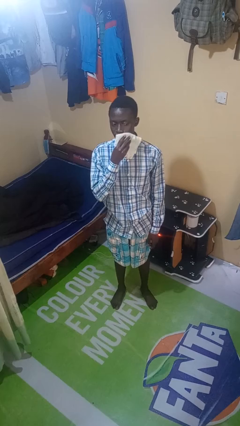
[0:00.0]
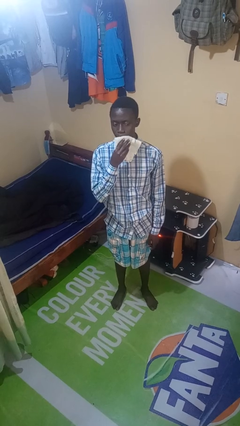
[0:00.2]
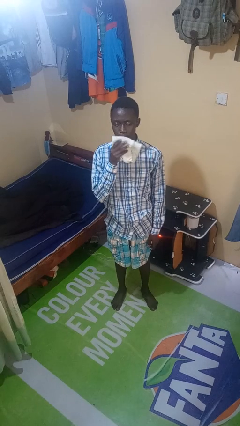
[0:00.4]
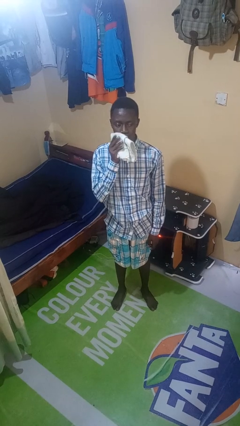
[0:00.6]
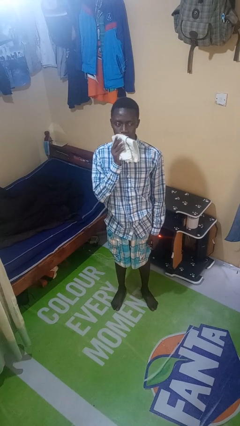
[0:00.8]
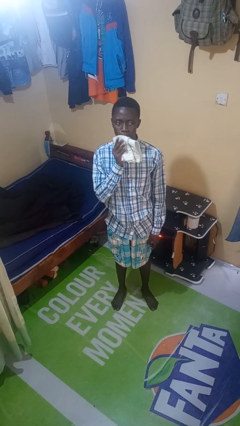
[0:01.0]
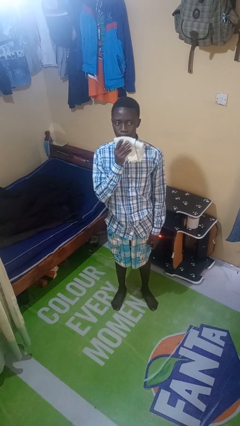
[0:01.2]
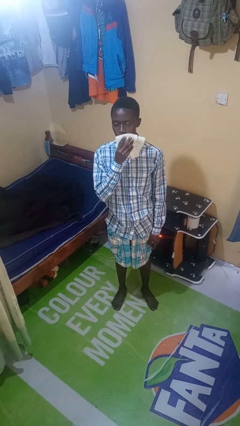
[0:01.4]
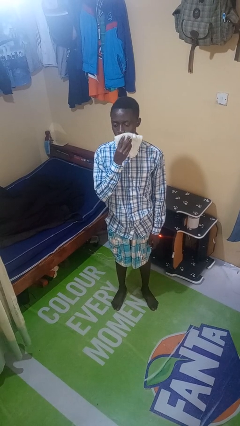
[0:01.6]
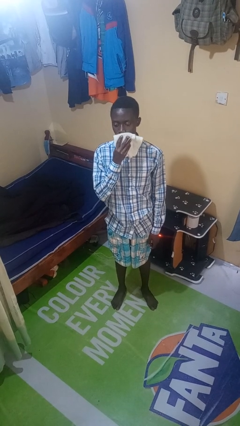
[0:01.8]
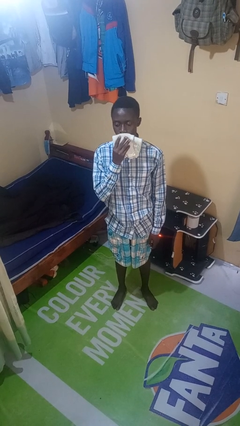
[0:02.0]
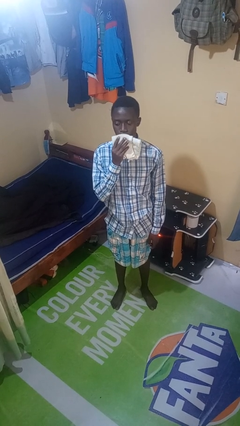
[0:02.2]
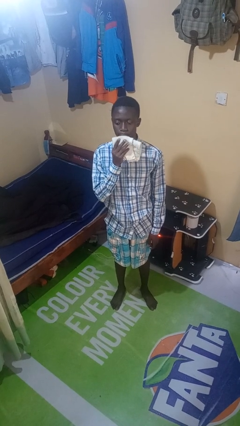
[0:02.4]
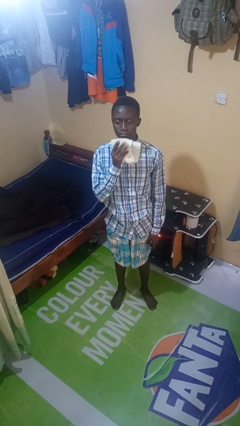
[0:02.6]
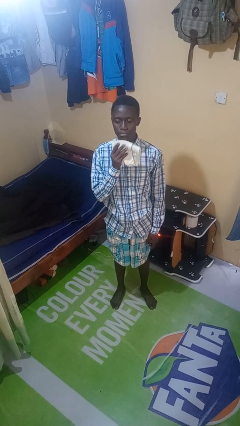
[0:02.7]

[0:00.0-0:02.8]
person wipes mouth with napkin

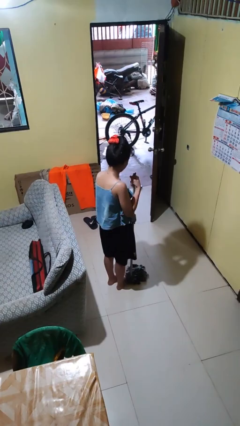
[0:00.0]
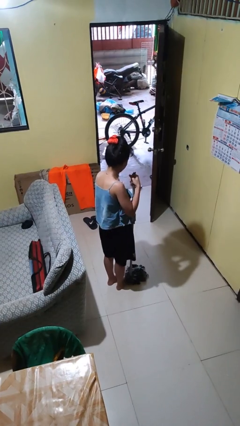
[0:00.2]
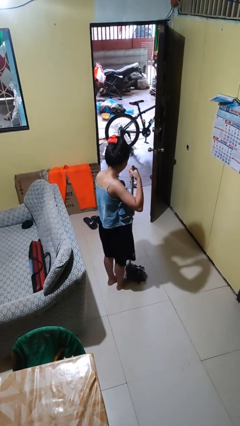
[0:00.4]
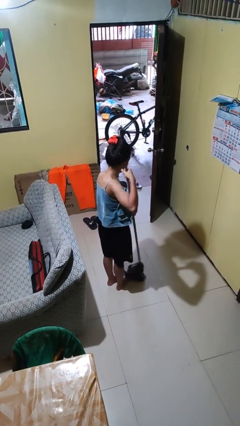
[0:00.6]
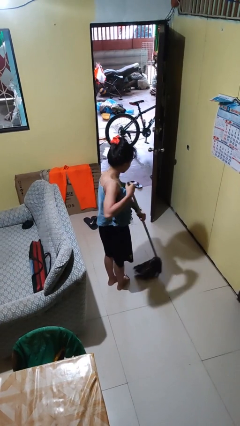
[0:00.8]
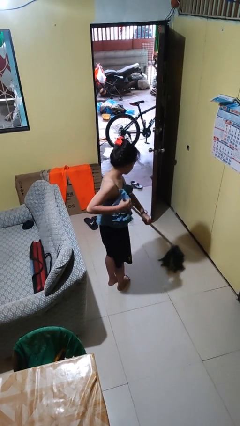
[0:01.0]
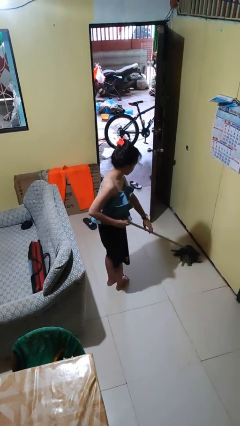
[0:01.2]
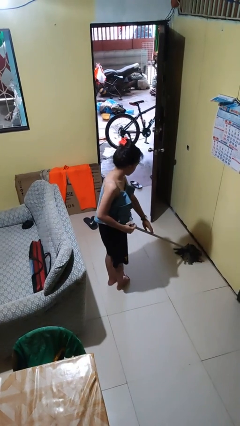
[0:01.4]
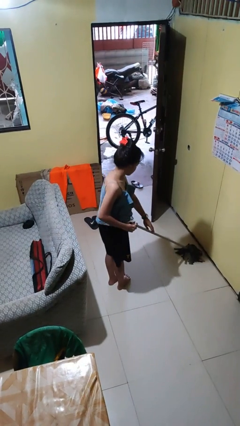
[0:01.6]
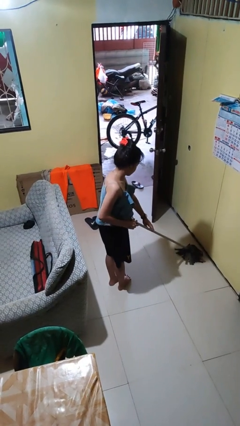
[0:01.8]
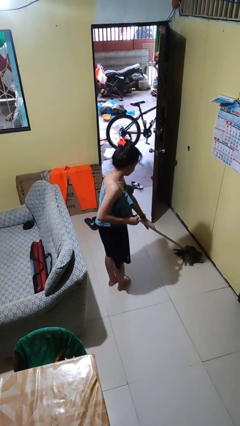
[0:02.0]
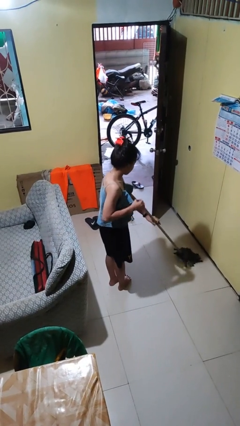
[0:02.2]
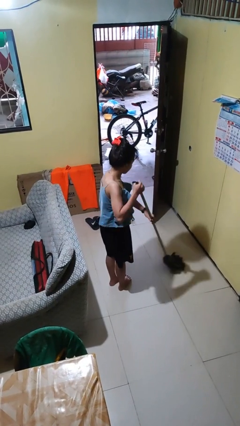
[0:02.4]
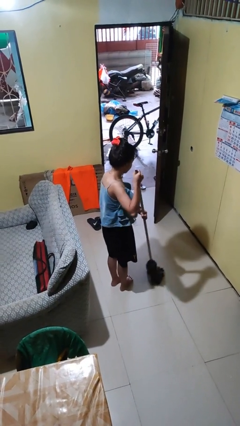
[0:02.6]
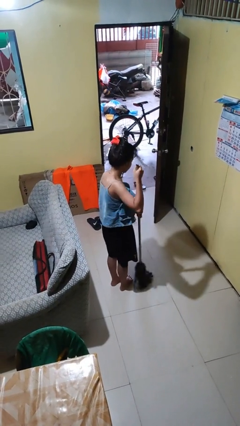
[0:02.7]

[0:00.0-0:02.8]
person mops

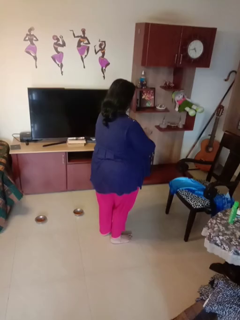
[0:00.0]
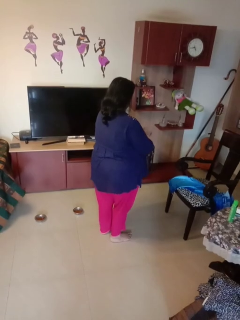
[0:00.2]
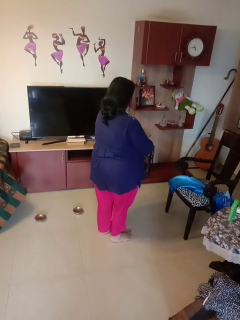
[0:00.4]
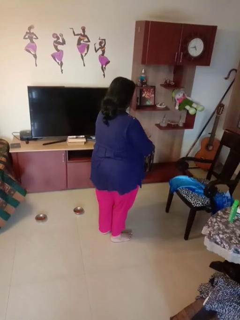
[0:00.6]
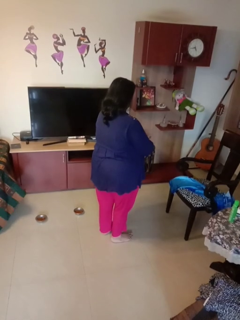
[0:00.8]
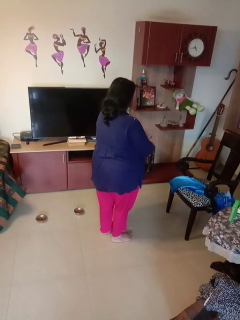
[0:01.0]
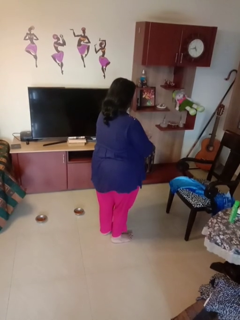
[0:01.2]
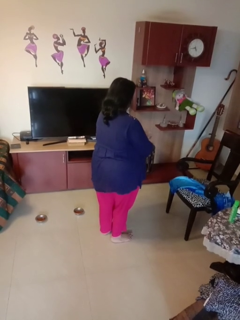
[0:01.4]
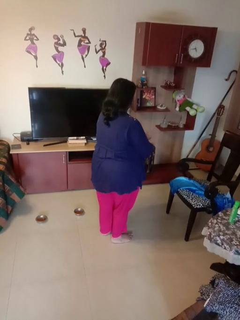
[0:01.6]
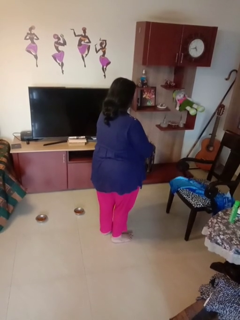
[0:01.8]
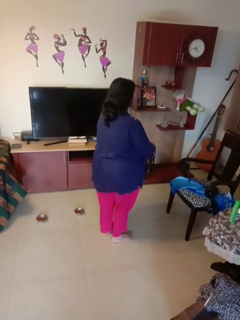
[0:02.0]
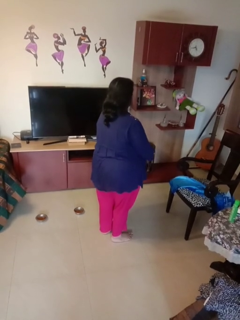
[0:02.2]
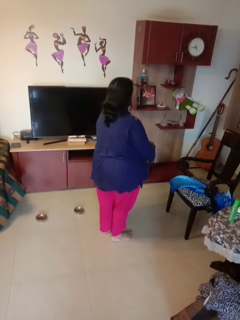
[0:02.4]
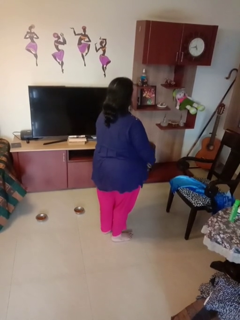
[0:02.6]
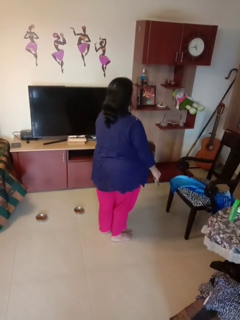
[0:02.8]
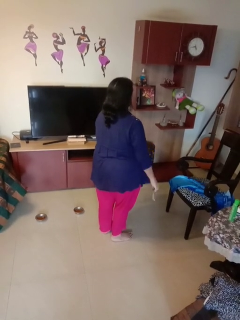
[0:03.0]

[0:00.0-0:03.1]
person takes off wristwatch

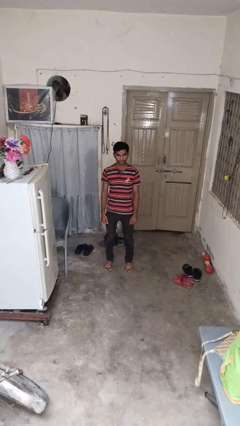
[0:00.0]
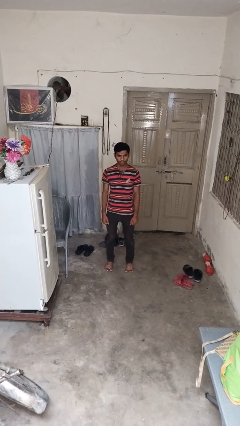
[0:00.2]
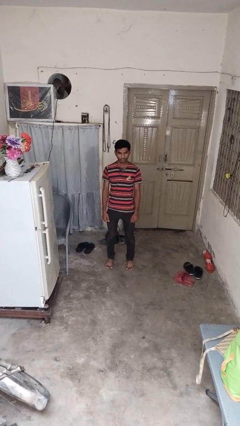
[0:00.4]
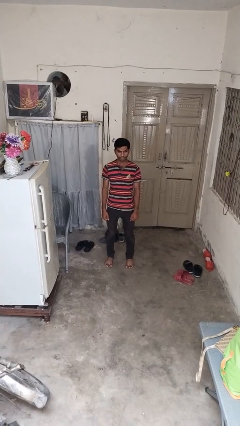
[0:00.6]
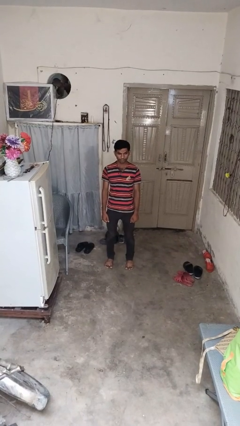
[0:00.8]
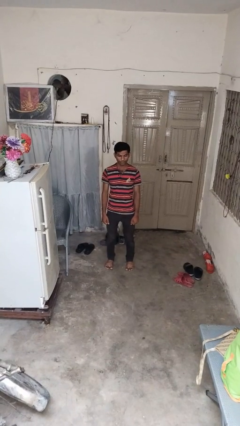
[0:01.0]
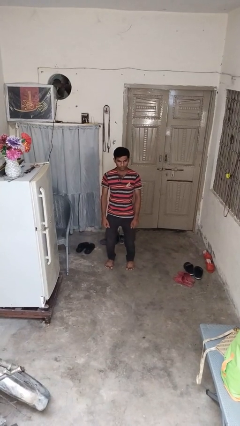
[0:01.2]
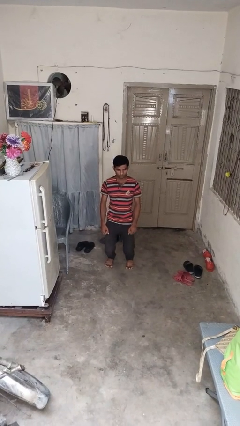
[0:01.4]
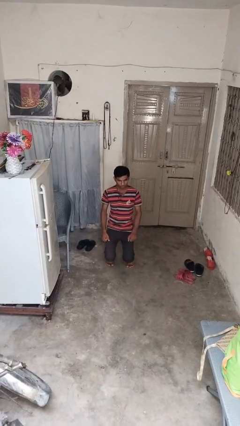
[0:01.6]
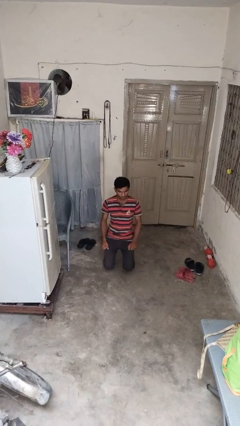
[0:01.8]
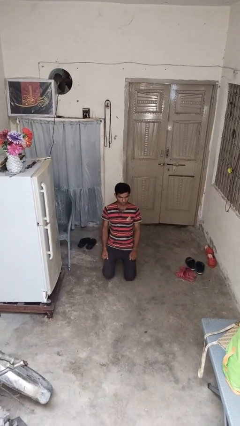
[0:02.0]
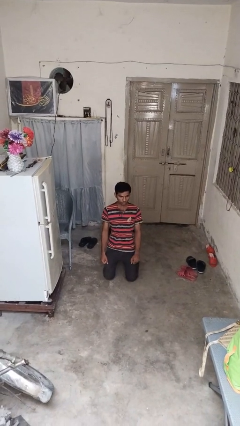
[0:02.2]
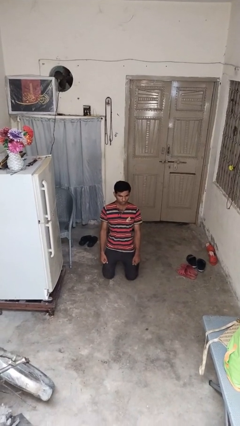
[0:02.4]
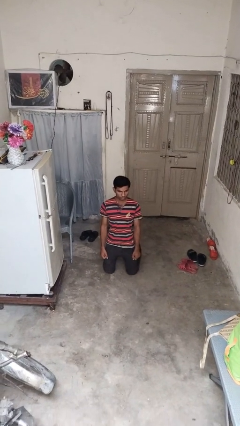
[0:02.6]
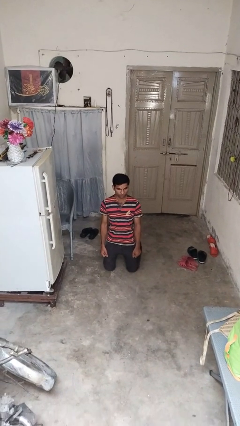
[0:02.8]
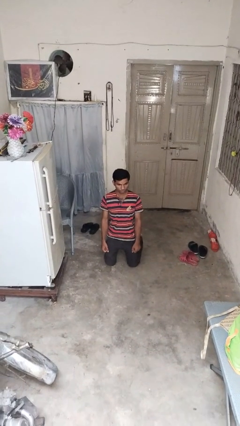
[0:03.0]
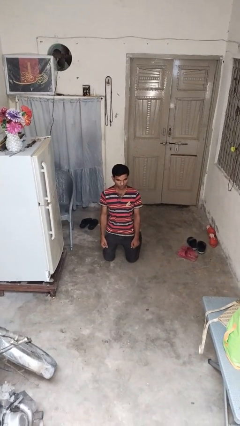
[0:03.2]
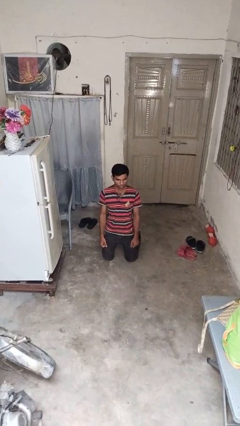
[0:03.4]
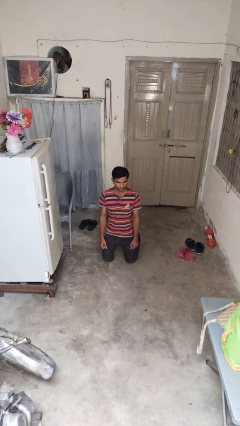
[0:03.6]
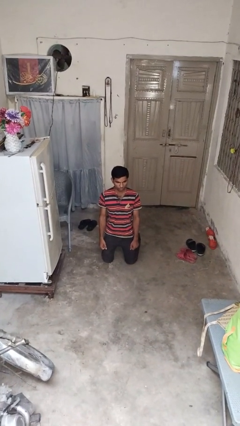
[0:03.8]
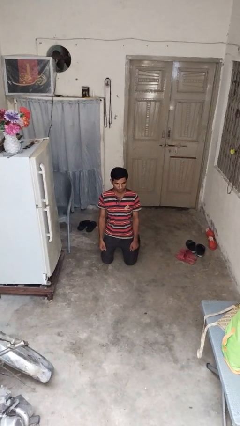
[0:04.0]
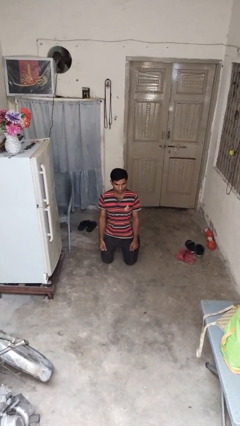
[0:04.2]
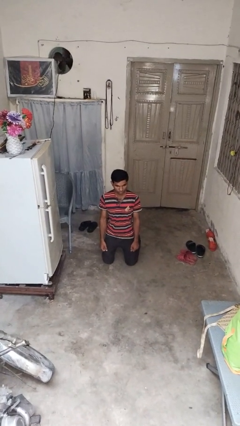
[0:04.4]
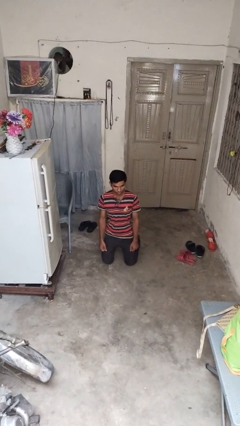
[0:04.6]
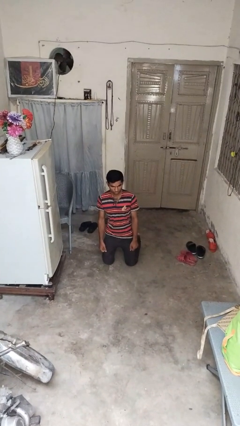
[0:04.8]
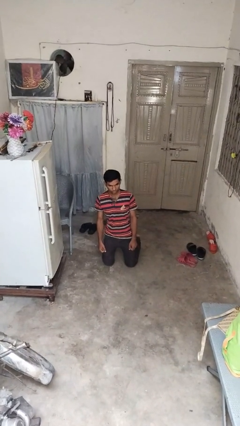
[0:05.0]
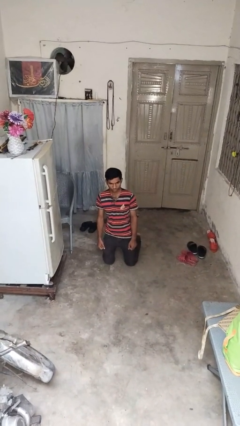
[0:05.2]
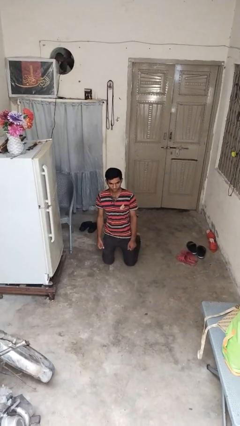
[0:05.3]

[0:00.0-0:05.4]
person kneels

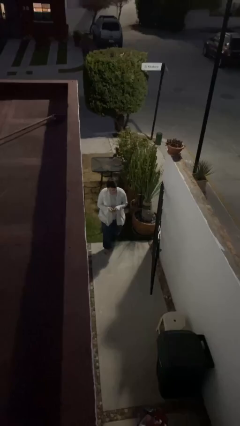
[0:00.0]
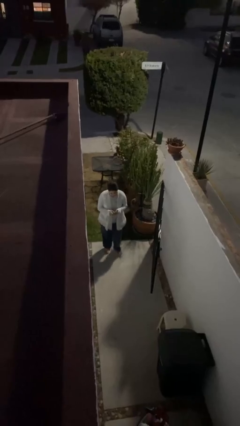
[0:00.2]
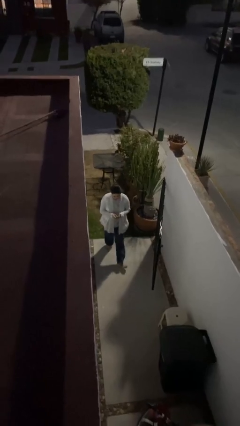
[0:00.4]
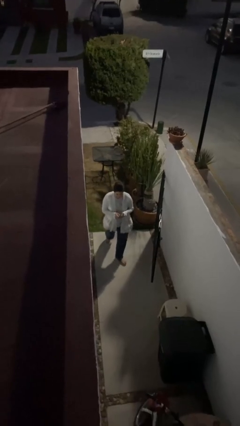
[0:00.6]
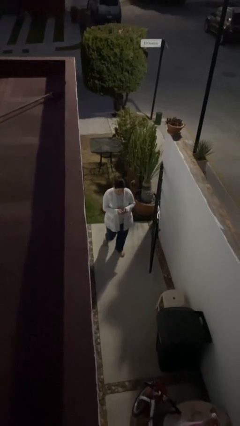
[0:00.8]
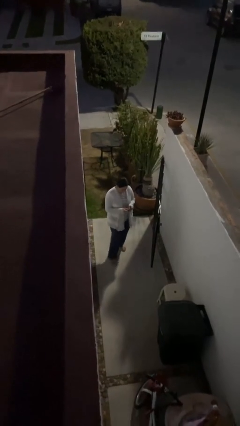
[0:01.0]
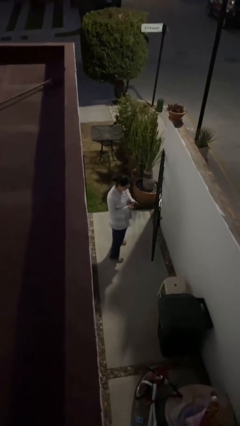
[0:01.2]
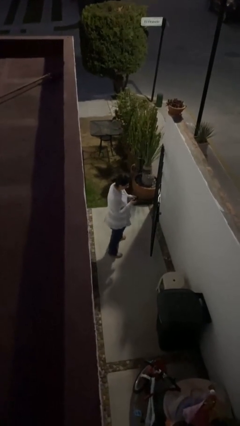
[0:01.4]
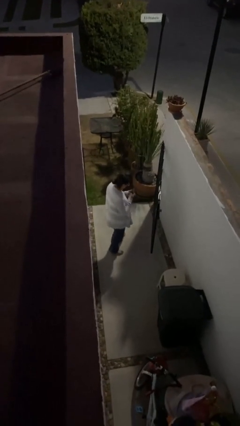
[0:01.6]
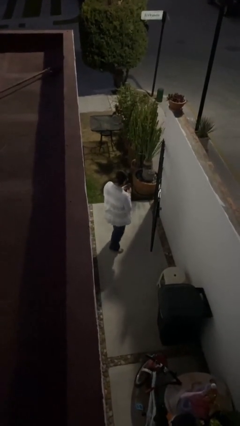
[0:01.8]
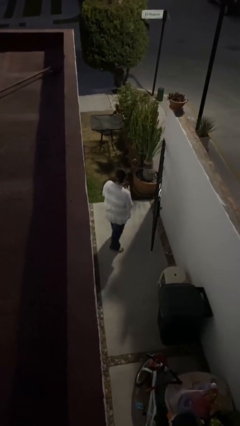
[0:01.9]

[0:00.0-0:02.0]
person enters scene through structure

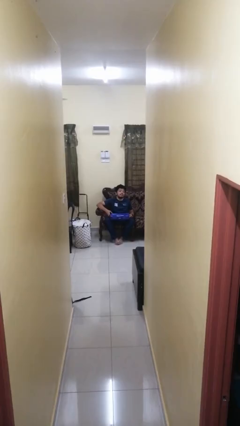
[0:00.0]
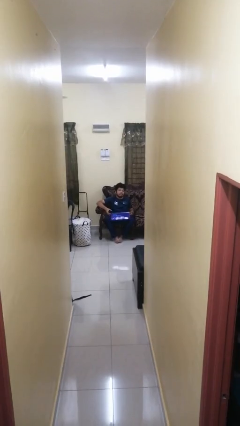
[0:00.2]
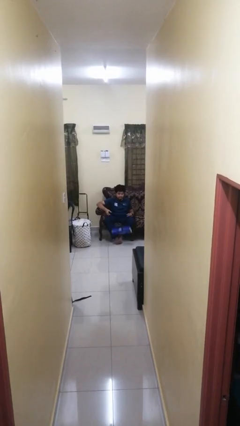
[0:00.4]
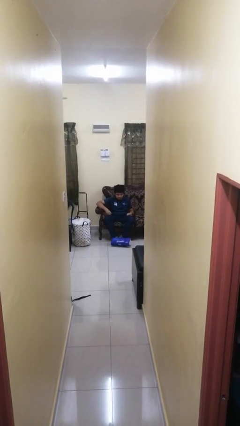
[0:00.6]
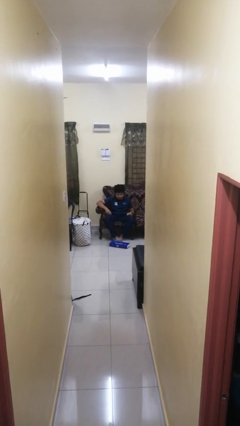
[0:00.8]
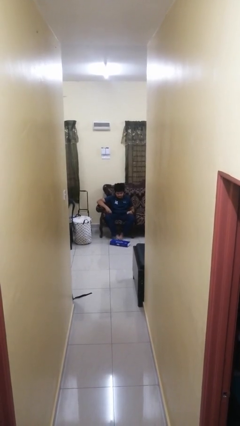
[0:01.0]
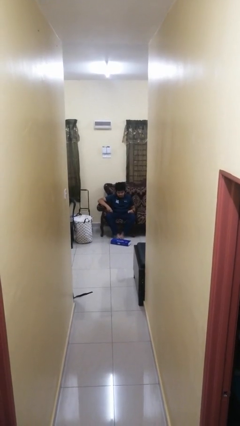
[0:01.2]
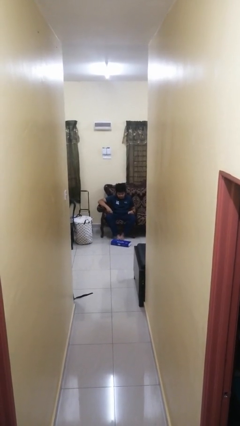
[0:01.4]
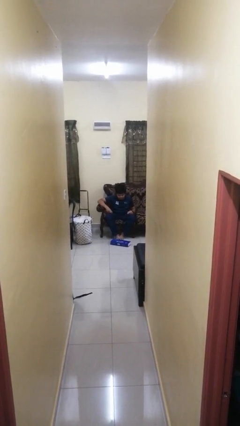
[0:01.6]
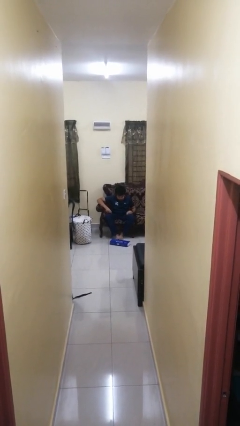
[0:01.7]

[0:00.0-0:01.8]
person drops object
